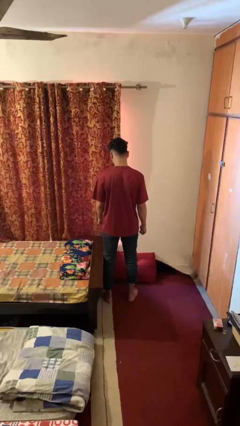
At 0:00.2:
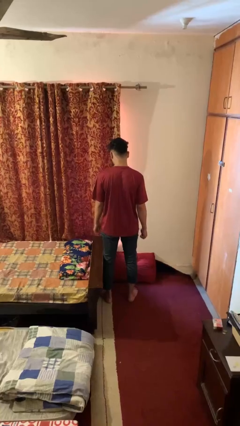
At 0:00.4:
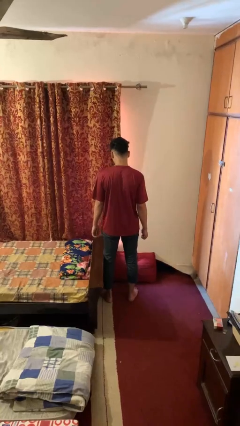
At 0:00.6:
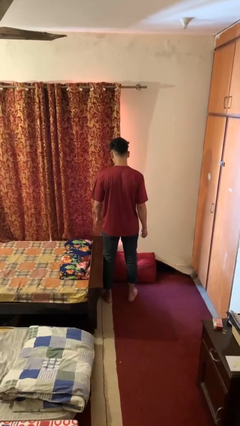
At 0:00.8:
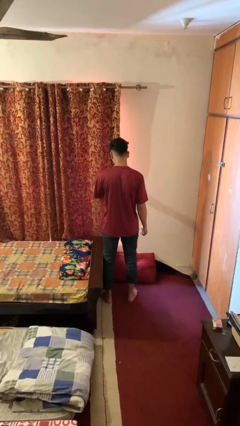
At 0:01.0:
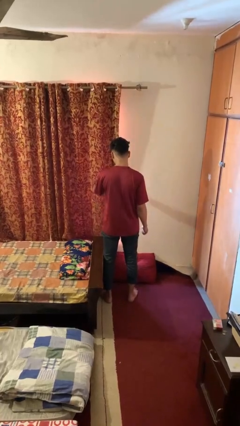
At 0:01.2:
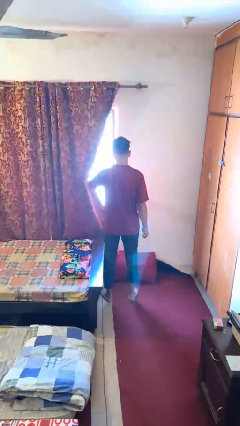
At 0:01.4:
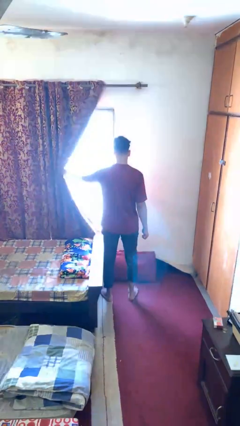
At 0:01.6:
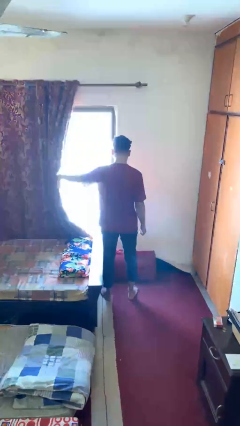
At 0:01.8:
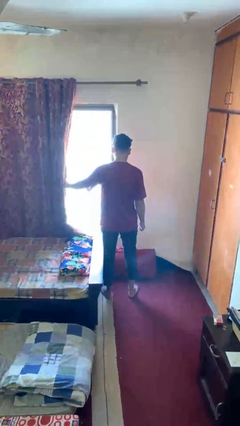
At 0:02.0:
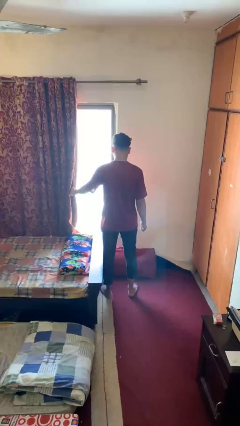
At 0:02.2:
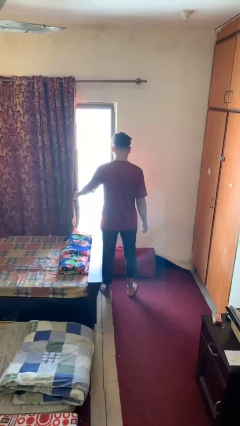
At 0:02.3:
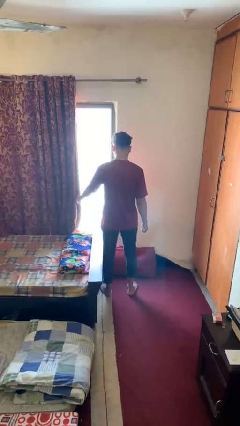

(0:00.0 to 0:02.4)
person opens curtains

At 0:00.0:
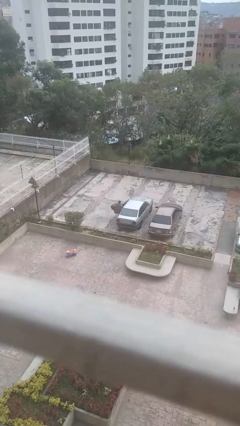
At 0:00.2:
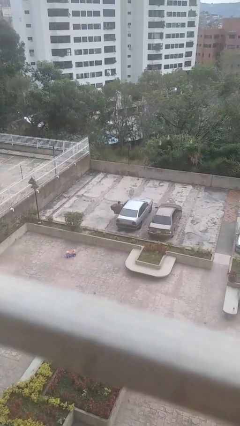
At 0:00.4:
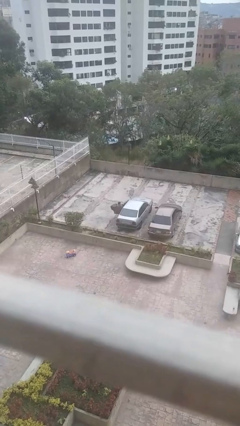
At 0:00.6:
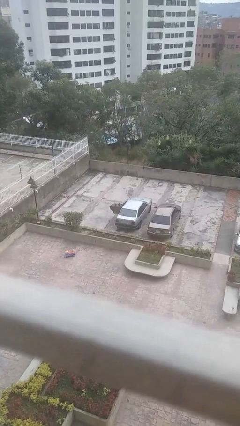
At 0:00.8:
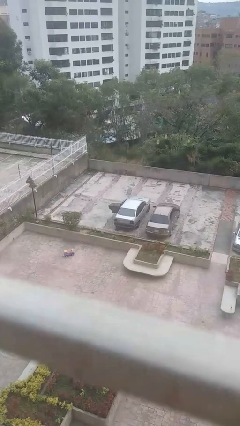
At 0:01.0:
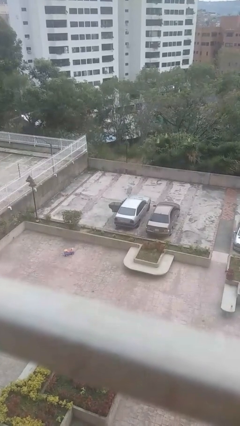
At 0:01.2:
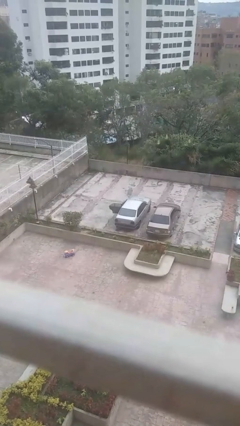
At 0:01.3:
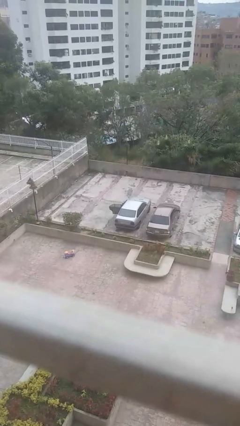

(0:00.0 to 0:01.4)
person enters car

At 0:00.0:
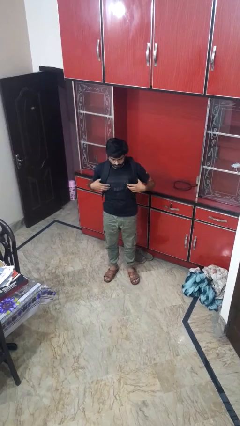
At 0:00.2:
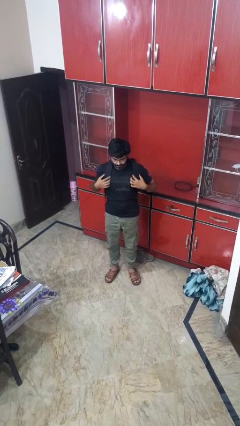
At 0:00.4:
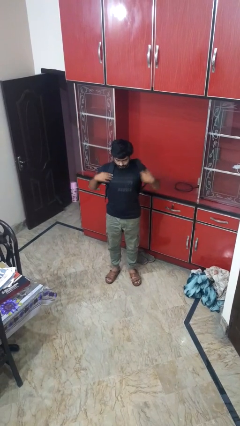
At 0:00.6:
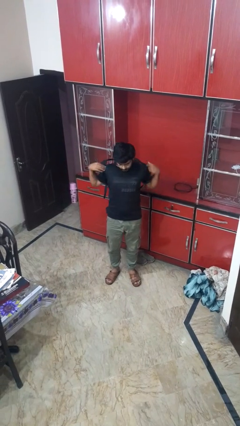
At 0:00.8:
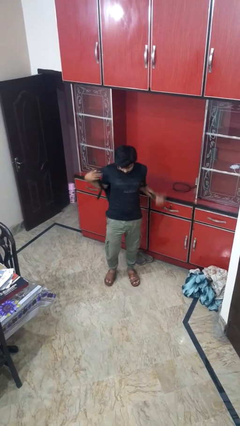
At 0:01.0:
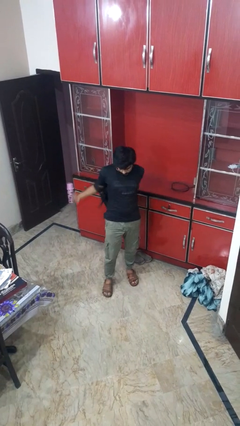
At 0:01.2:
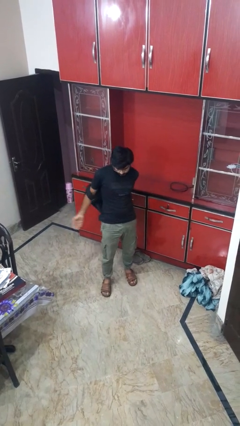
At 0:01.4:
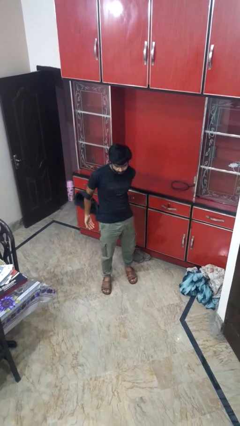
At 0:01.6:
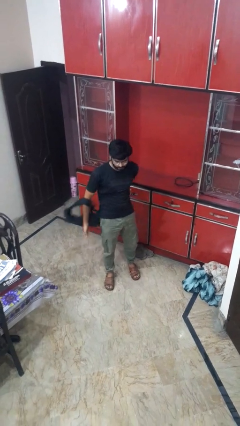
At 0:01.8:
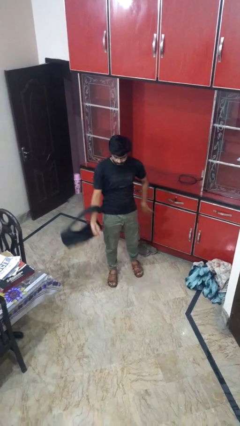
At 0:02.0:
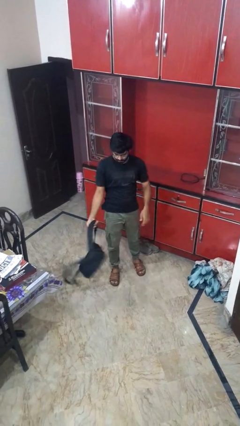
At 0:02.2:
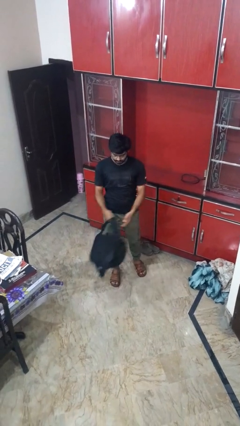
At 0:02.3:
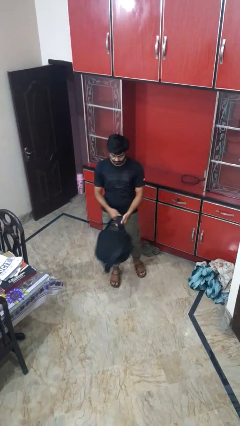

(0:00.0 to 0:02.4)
person takes off backpack

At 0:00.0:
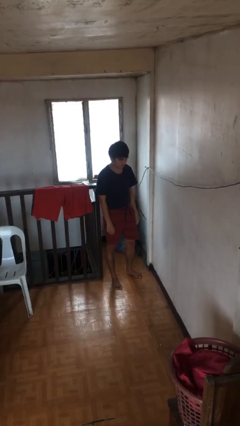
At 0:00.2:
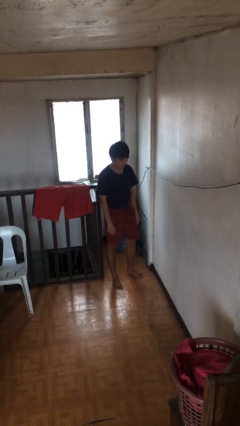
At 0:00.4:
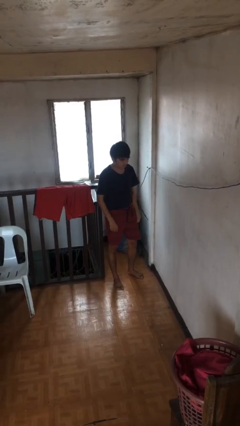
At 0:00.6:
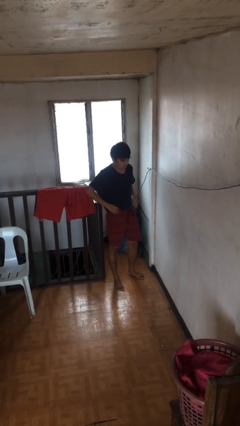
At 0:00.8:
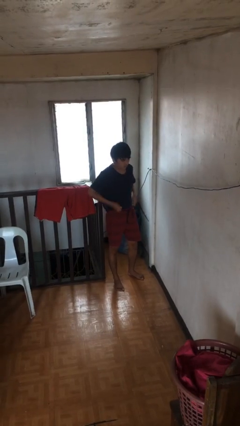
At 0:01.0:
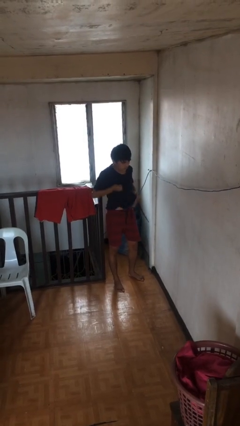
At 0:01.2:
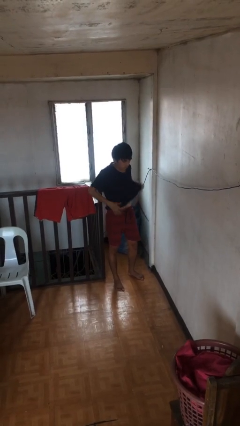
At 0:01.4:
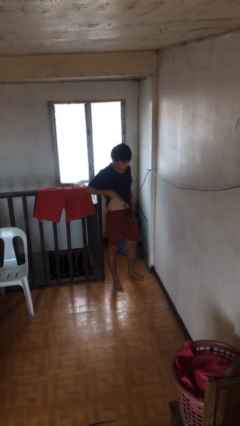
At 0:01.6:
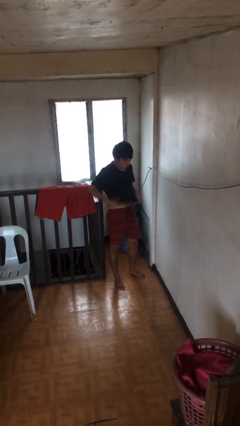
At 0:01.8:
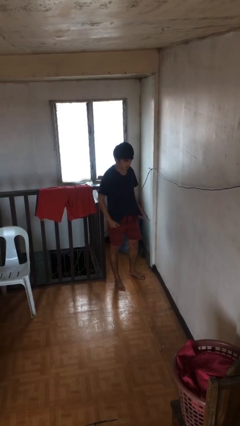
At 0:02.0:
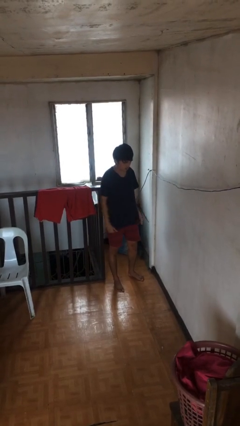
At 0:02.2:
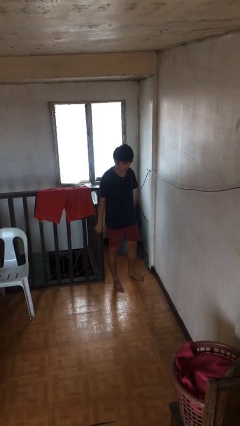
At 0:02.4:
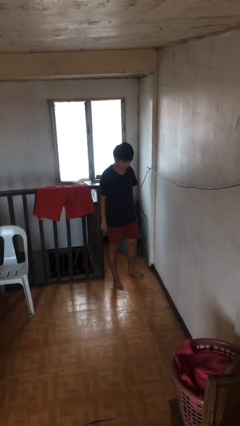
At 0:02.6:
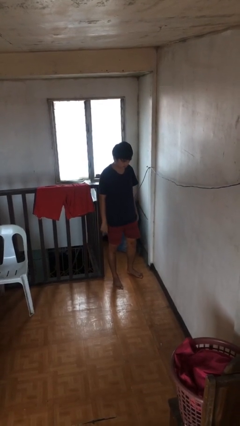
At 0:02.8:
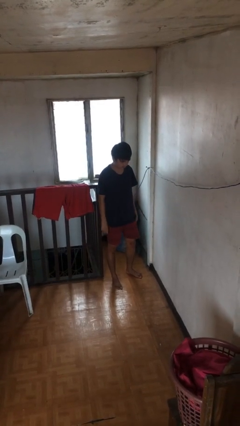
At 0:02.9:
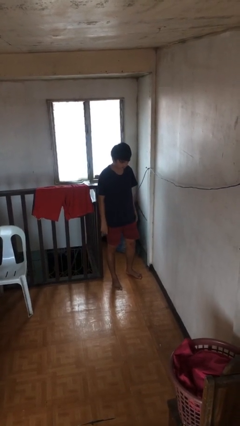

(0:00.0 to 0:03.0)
person untucks shirt

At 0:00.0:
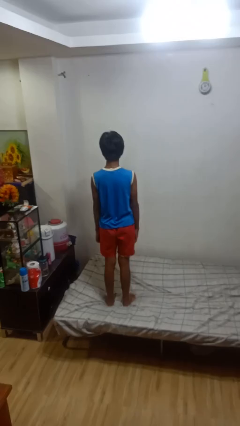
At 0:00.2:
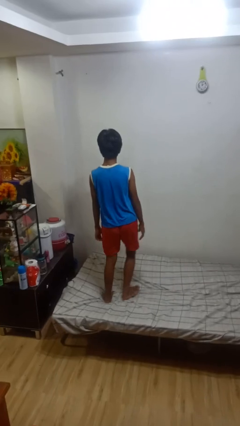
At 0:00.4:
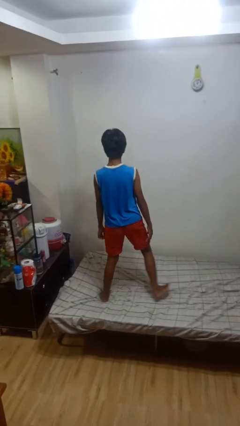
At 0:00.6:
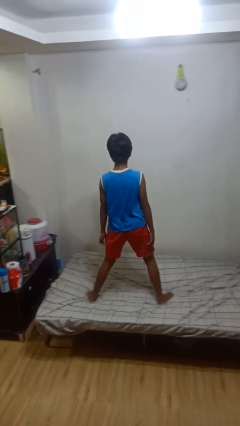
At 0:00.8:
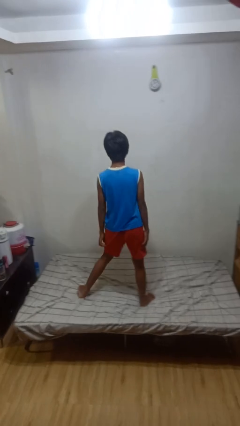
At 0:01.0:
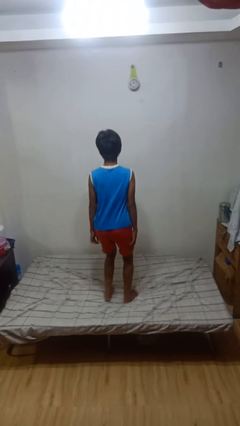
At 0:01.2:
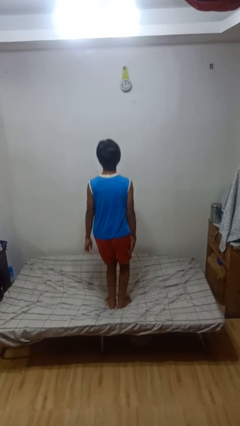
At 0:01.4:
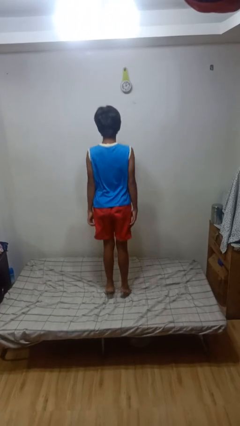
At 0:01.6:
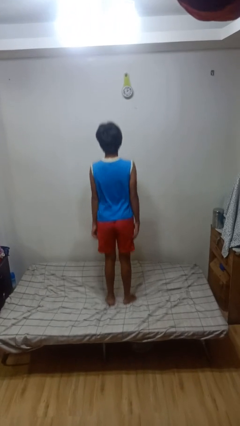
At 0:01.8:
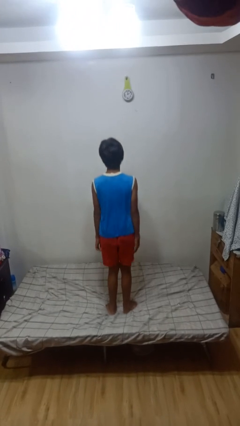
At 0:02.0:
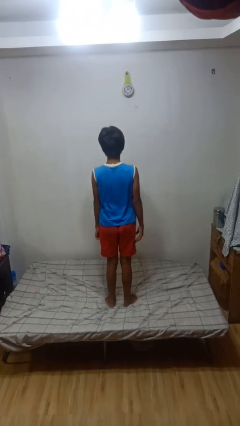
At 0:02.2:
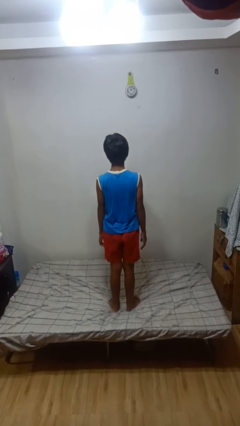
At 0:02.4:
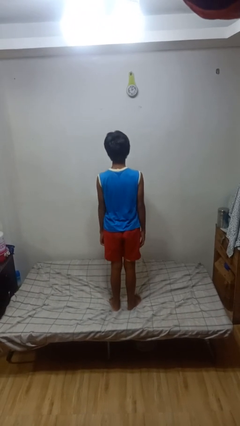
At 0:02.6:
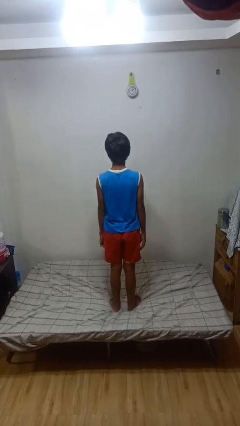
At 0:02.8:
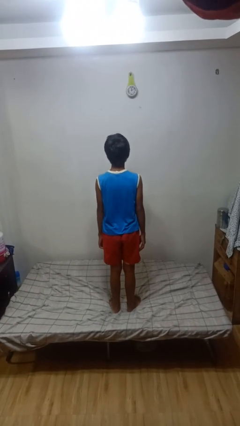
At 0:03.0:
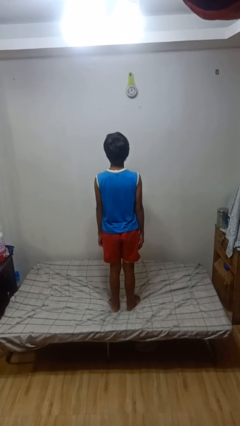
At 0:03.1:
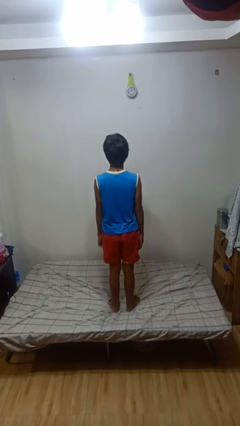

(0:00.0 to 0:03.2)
person jumps on bed

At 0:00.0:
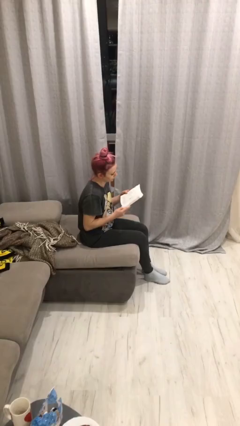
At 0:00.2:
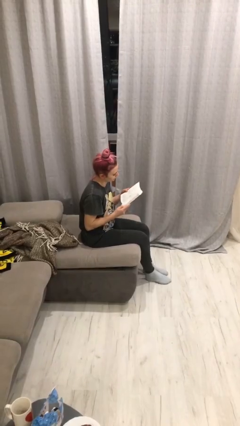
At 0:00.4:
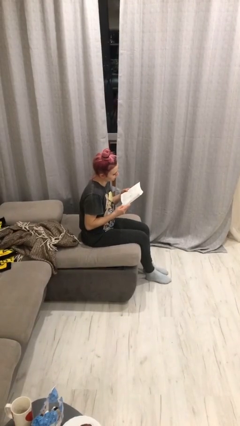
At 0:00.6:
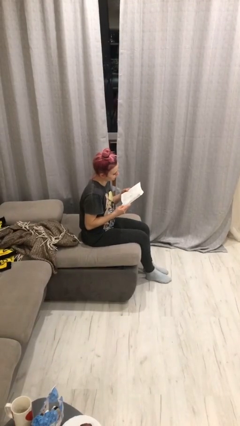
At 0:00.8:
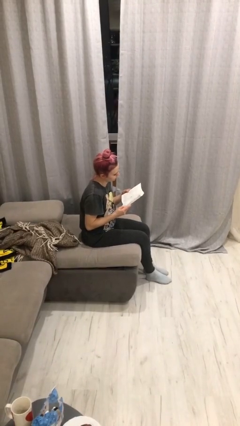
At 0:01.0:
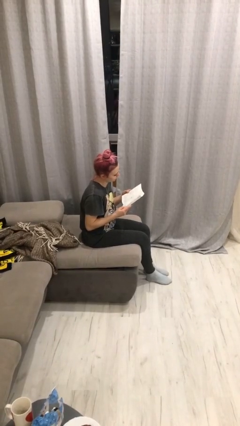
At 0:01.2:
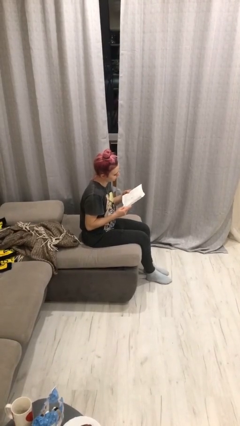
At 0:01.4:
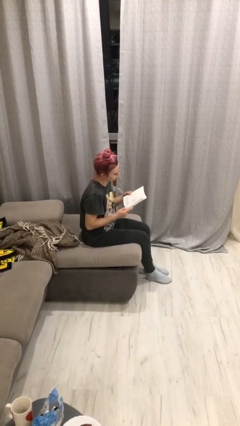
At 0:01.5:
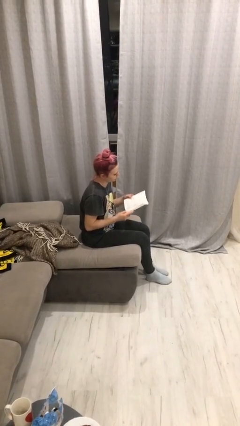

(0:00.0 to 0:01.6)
person reads document

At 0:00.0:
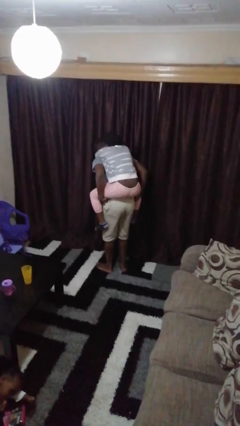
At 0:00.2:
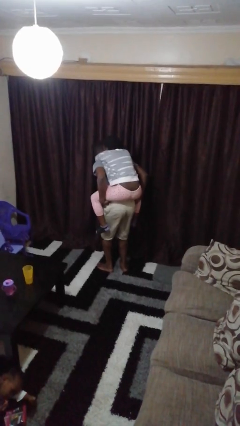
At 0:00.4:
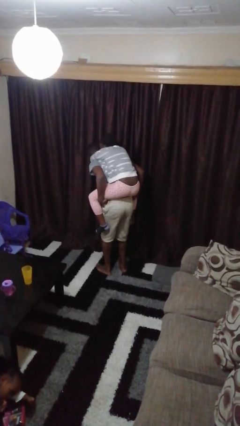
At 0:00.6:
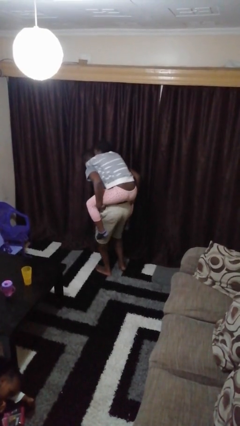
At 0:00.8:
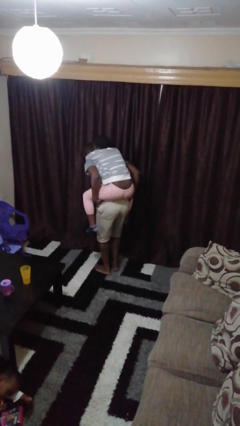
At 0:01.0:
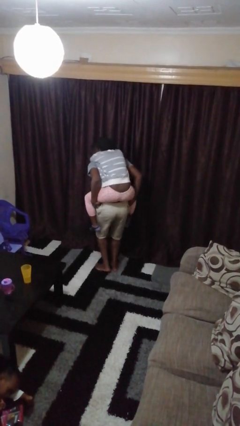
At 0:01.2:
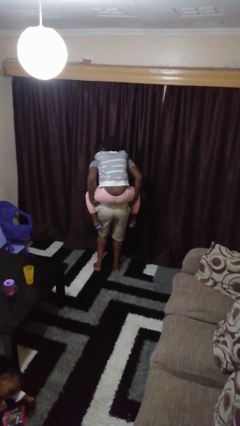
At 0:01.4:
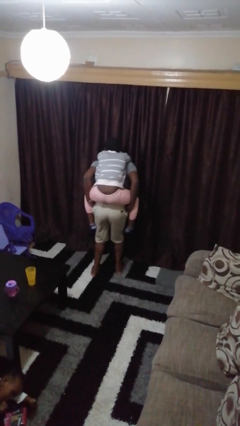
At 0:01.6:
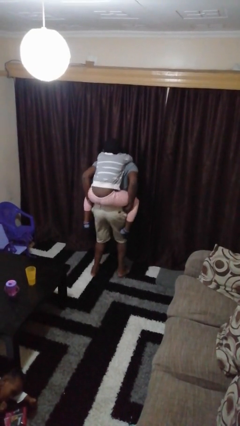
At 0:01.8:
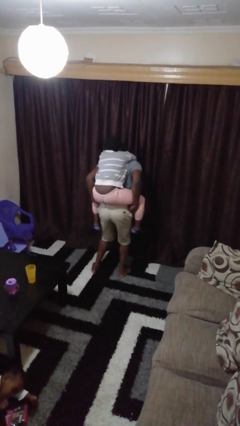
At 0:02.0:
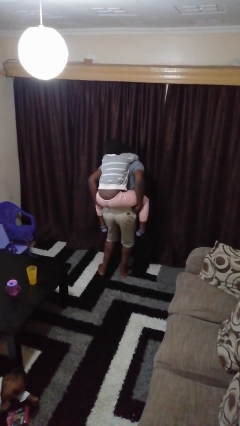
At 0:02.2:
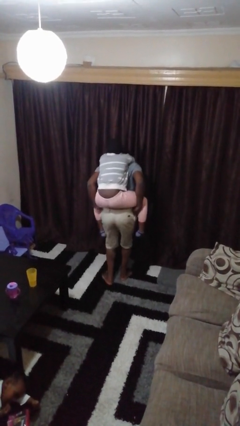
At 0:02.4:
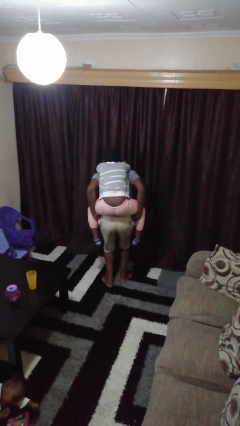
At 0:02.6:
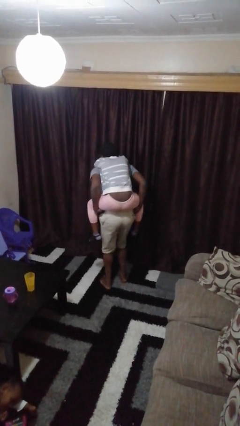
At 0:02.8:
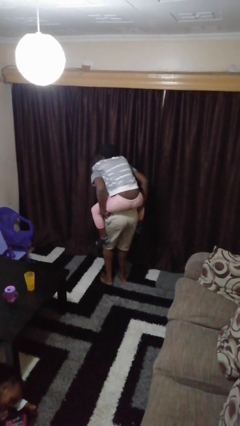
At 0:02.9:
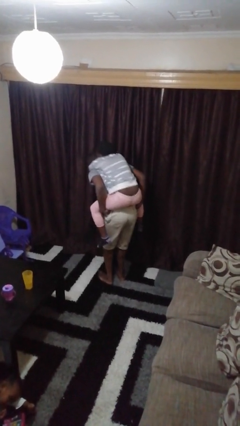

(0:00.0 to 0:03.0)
person carries person on back
